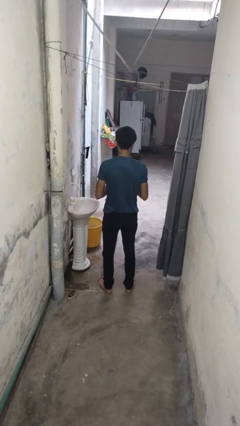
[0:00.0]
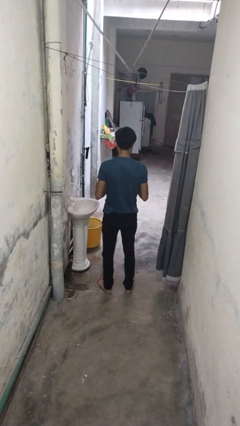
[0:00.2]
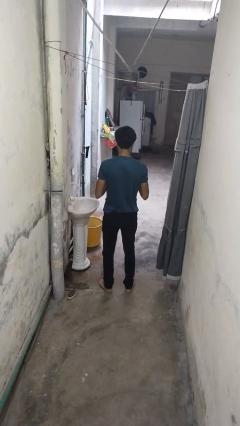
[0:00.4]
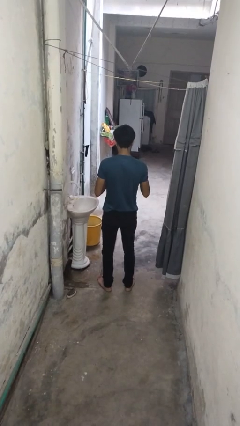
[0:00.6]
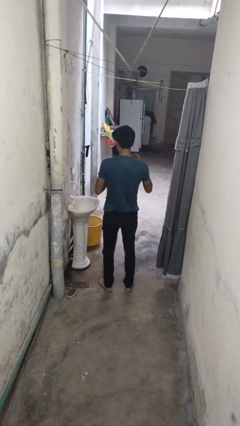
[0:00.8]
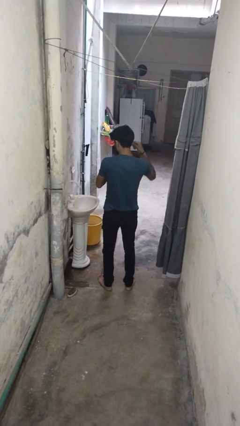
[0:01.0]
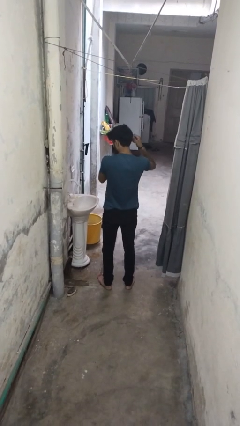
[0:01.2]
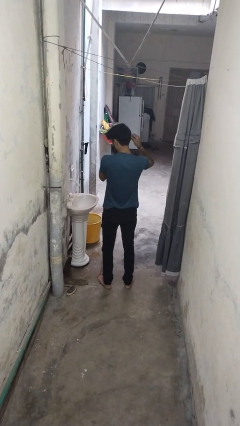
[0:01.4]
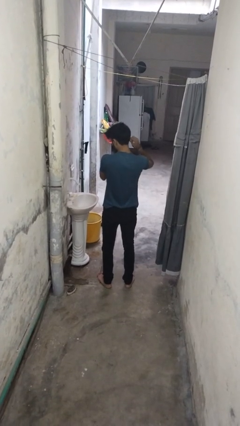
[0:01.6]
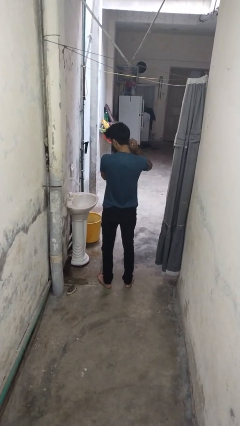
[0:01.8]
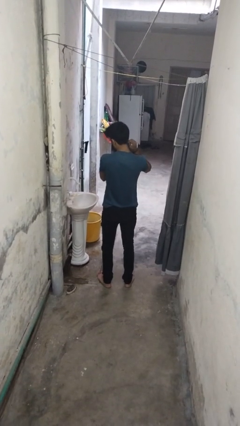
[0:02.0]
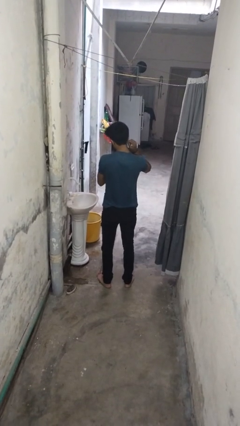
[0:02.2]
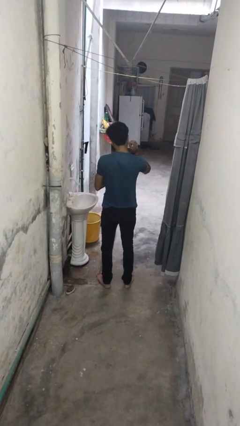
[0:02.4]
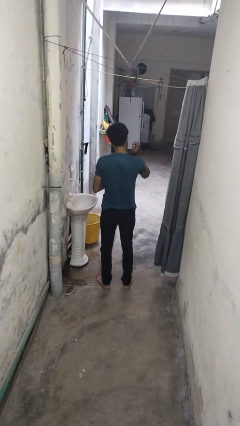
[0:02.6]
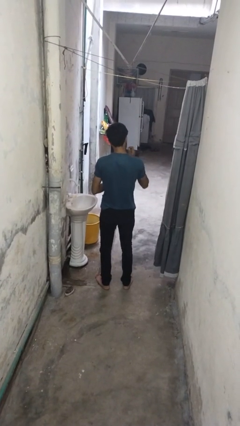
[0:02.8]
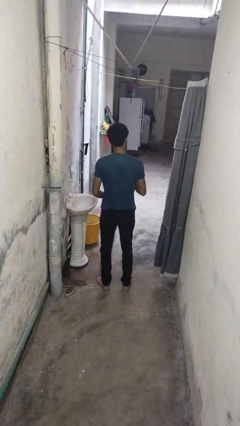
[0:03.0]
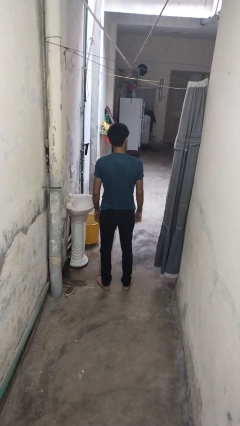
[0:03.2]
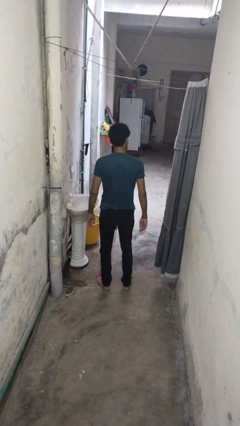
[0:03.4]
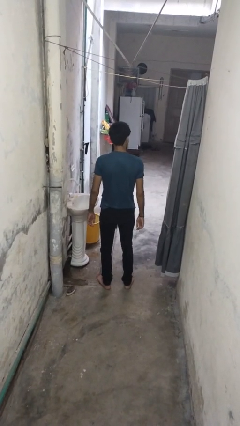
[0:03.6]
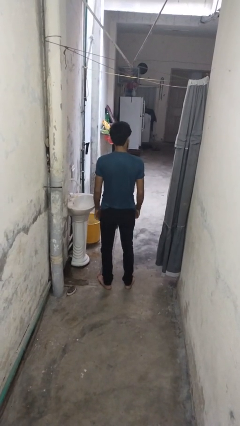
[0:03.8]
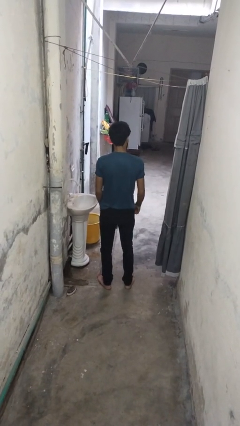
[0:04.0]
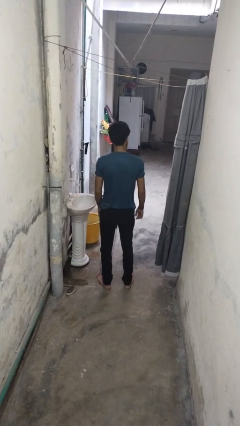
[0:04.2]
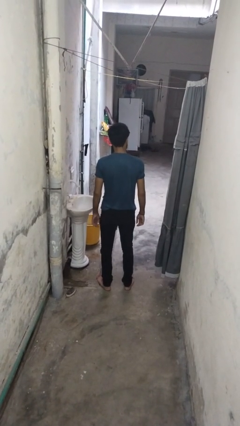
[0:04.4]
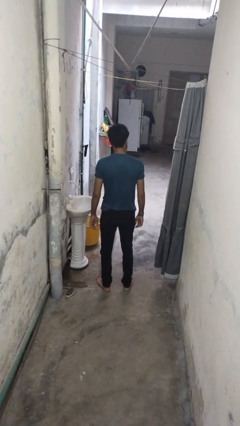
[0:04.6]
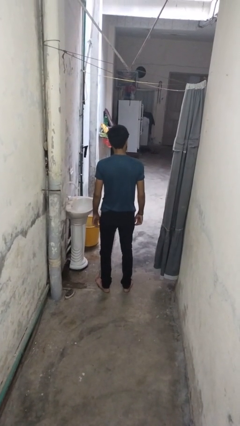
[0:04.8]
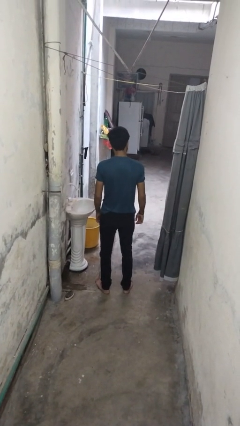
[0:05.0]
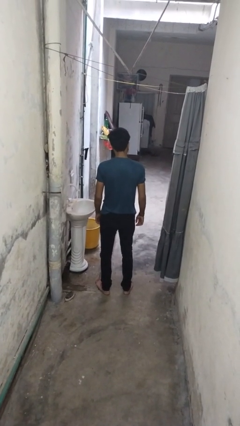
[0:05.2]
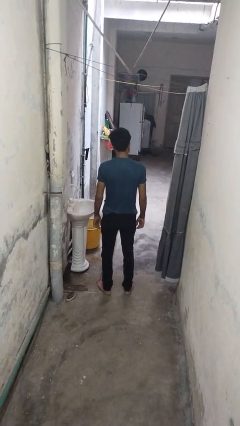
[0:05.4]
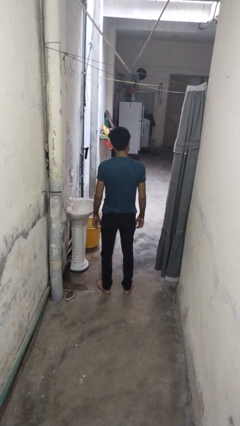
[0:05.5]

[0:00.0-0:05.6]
person puts on earrings

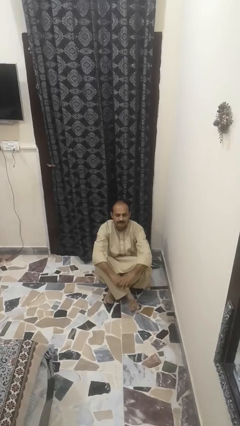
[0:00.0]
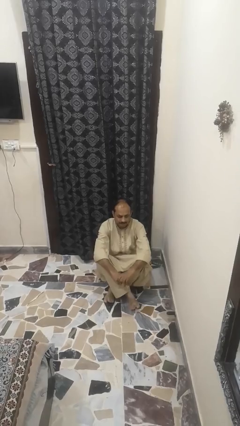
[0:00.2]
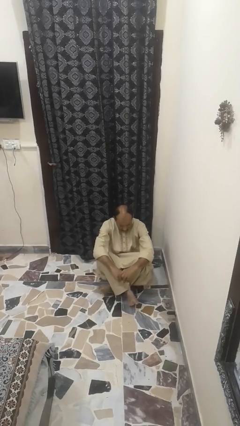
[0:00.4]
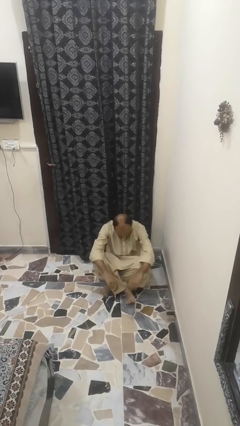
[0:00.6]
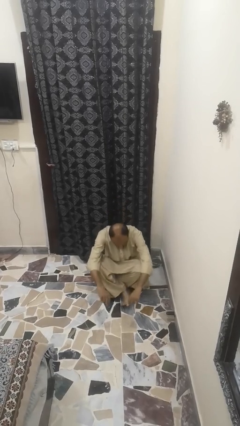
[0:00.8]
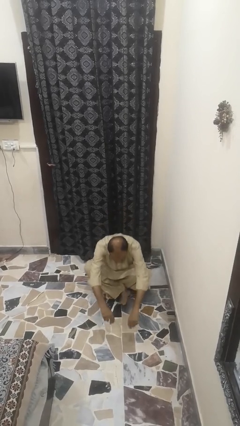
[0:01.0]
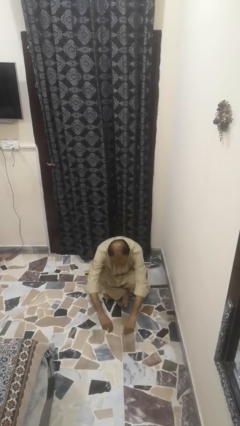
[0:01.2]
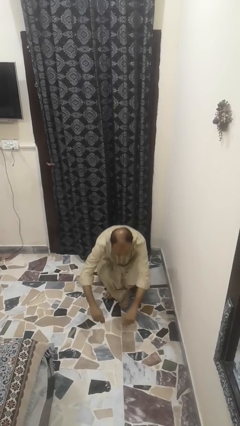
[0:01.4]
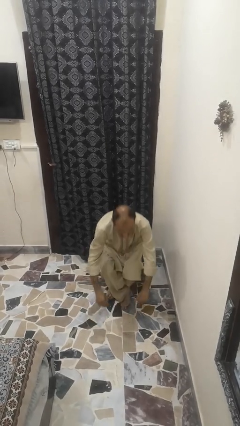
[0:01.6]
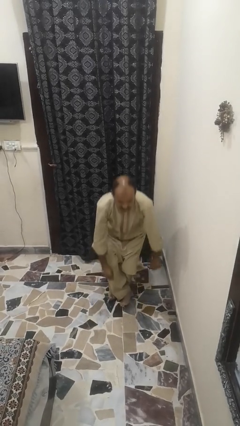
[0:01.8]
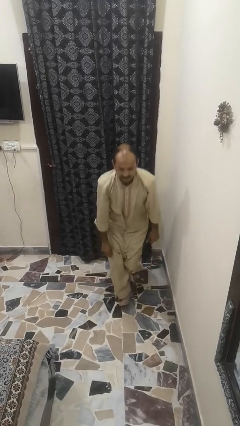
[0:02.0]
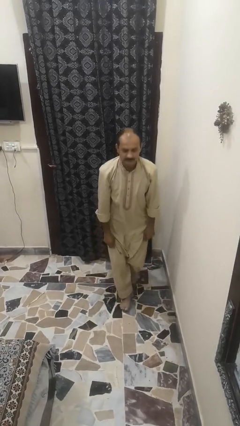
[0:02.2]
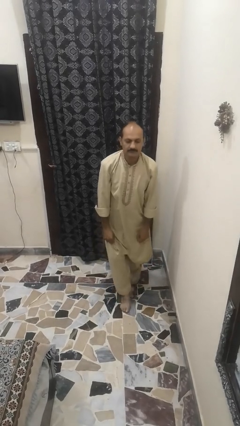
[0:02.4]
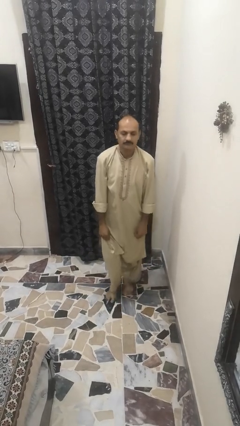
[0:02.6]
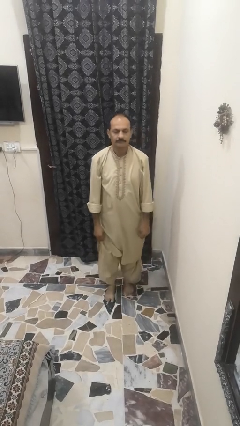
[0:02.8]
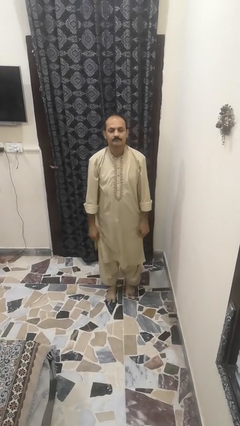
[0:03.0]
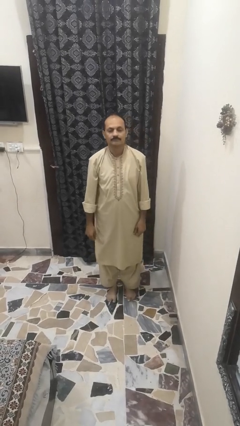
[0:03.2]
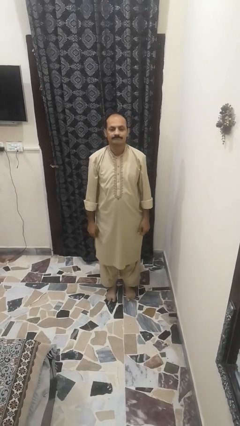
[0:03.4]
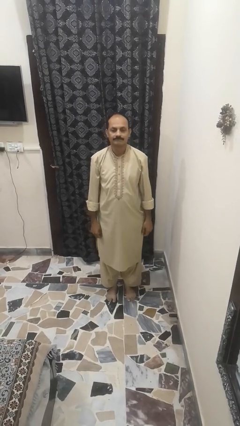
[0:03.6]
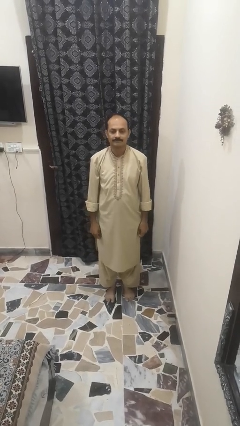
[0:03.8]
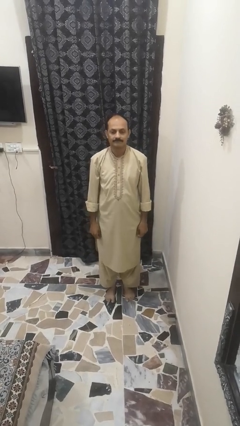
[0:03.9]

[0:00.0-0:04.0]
person sits crisscross

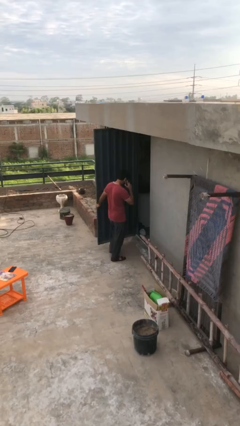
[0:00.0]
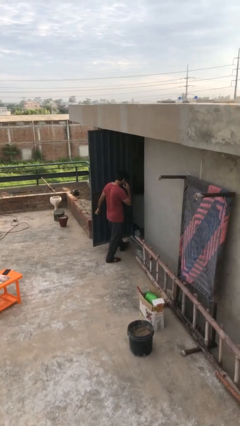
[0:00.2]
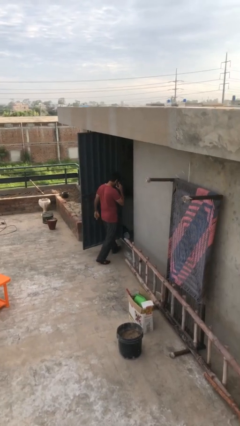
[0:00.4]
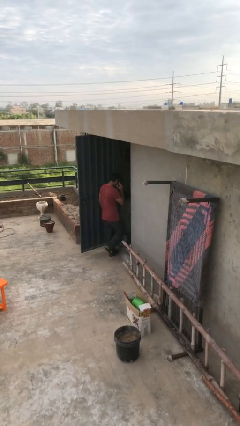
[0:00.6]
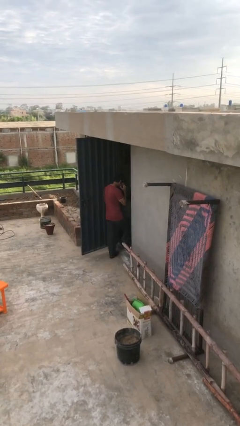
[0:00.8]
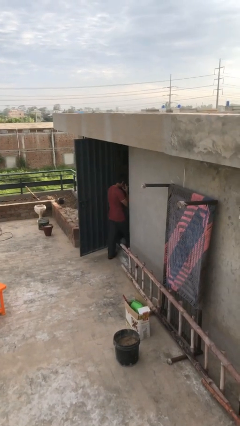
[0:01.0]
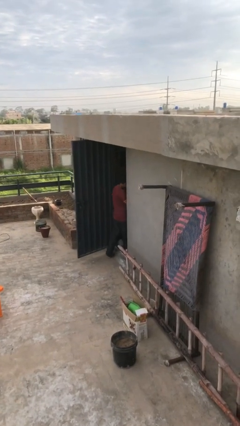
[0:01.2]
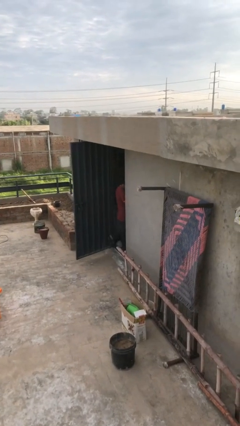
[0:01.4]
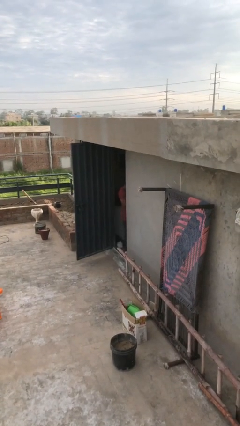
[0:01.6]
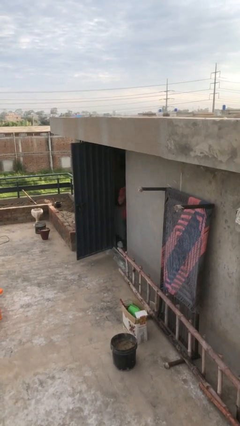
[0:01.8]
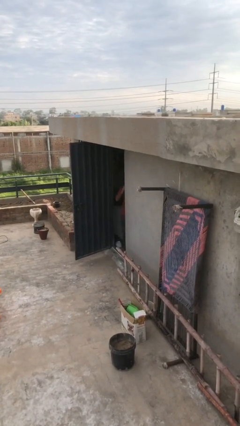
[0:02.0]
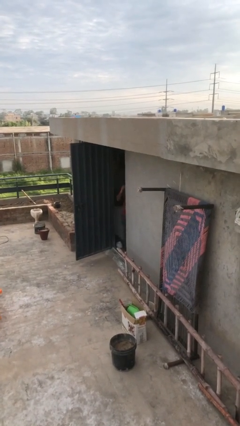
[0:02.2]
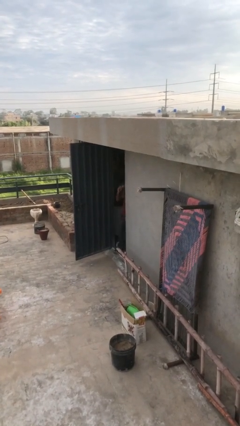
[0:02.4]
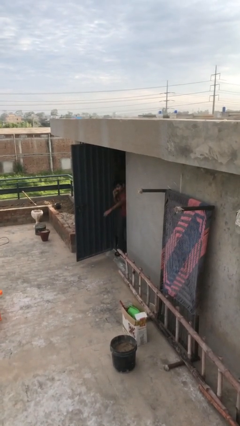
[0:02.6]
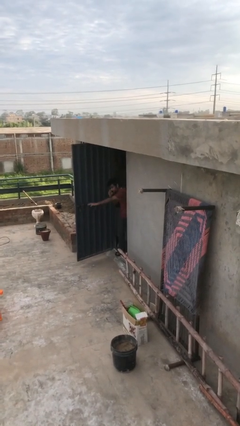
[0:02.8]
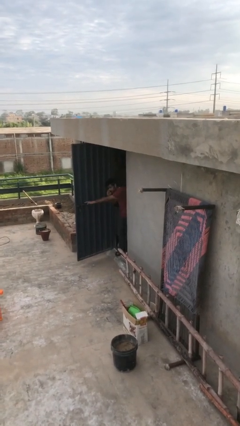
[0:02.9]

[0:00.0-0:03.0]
person exits scene through structure

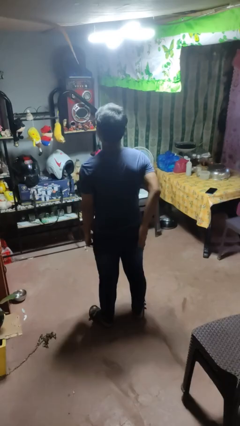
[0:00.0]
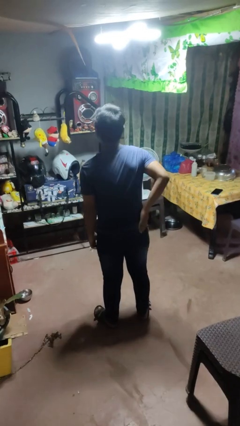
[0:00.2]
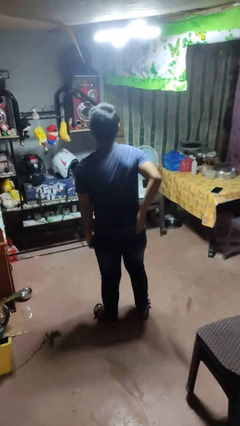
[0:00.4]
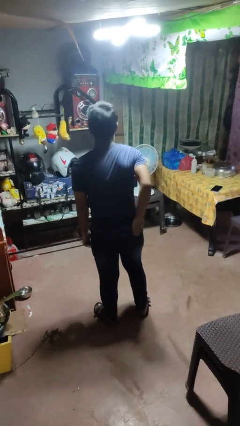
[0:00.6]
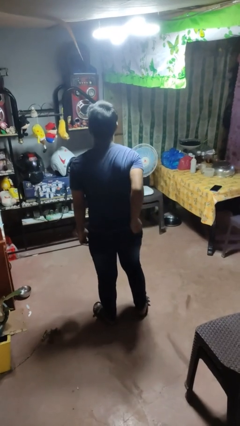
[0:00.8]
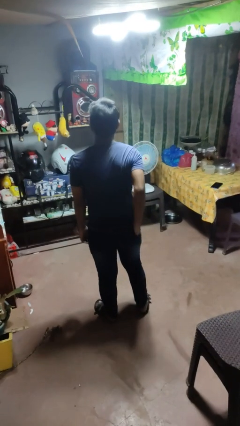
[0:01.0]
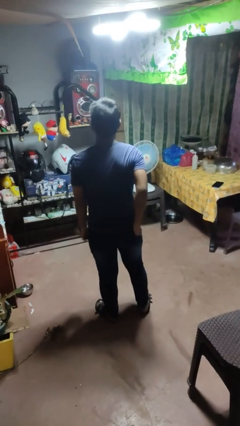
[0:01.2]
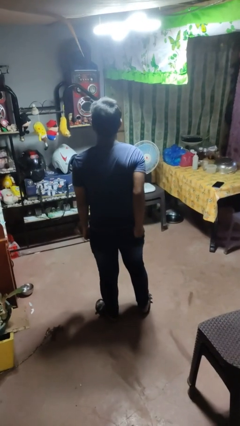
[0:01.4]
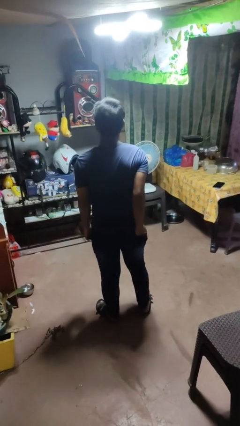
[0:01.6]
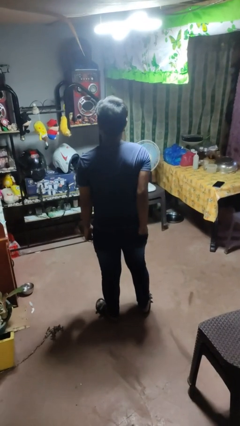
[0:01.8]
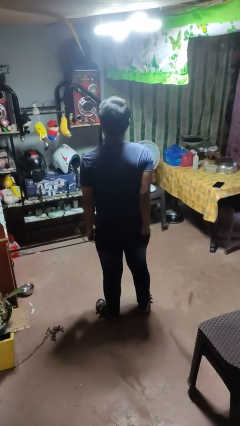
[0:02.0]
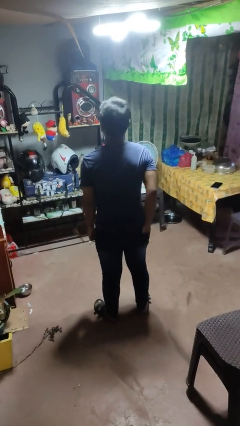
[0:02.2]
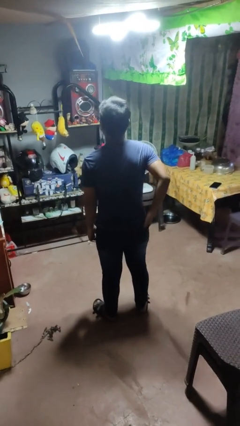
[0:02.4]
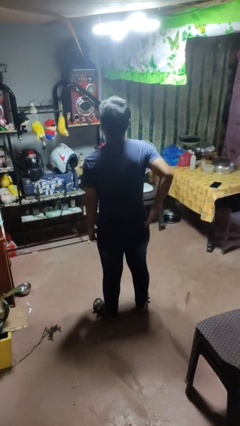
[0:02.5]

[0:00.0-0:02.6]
person puts hands in back pockets

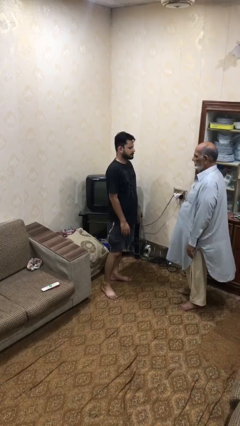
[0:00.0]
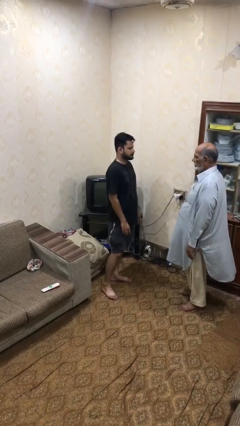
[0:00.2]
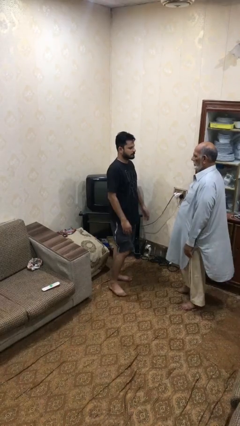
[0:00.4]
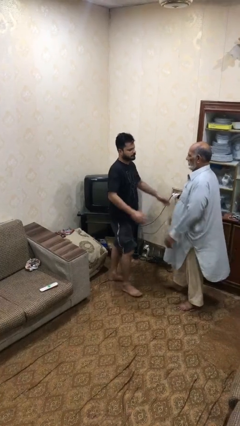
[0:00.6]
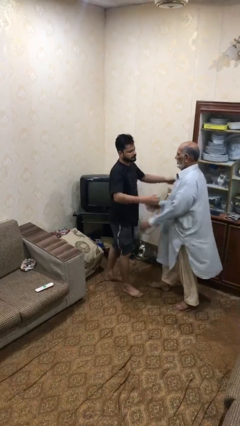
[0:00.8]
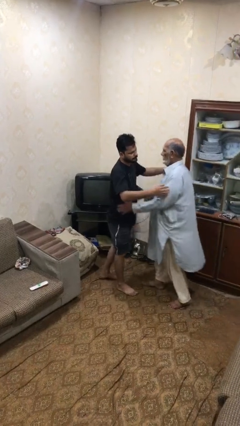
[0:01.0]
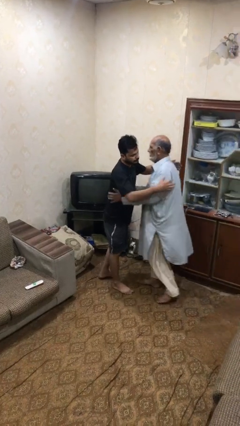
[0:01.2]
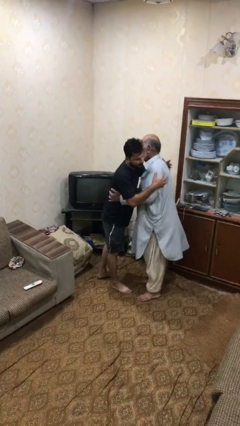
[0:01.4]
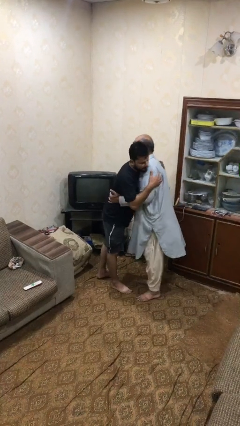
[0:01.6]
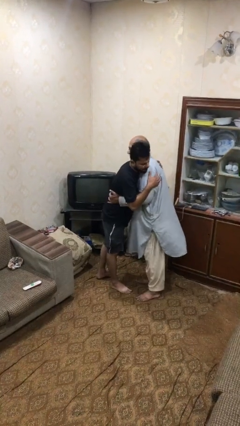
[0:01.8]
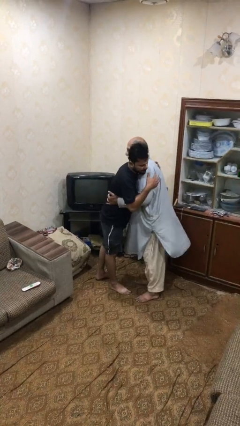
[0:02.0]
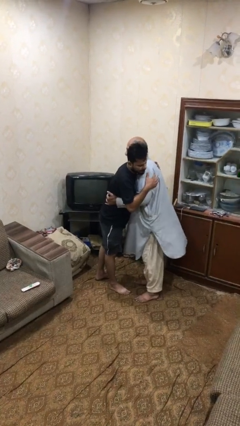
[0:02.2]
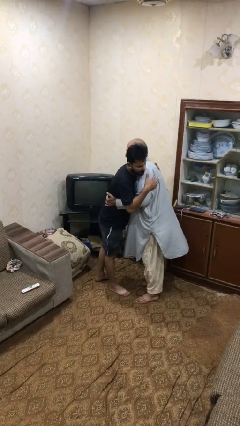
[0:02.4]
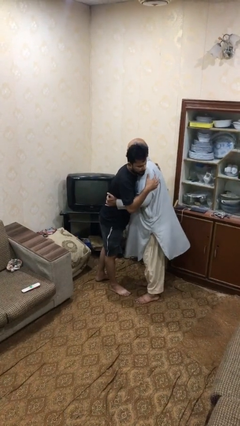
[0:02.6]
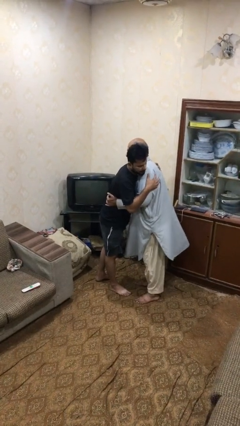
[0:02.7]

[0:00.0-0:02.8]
person embraces person
